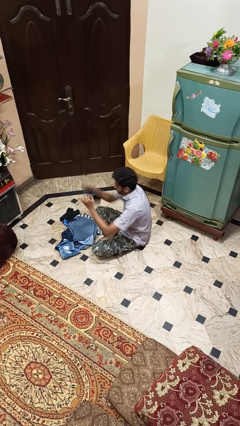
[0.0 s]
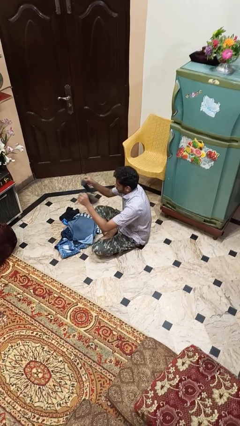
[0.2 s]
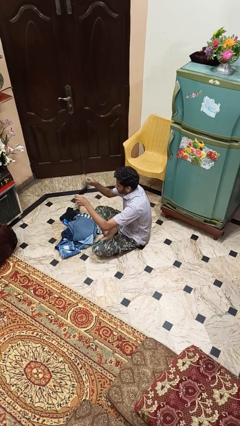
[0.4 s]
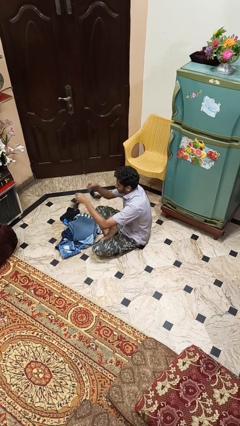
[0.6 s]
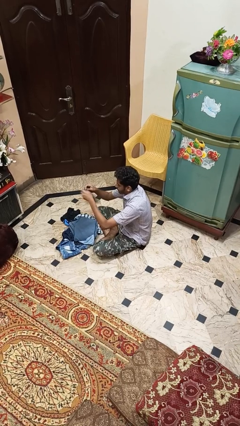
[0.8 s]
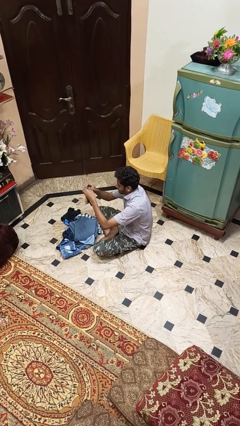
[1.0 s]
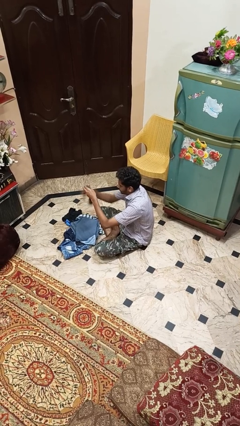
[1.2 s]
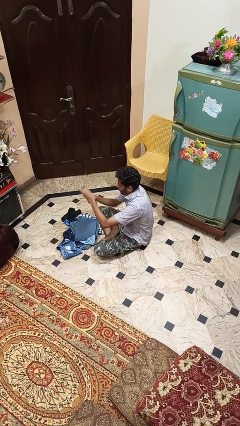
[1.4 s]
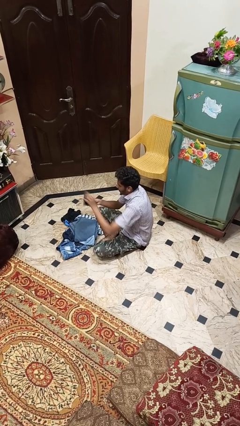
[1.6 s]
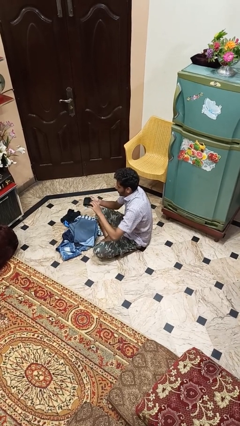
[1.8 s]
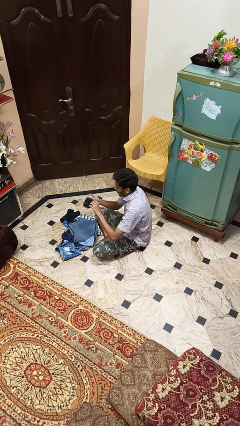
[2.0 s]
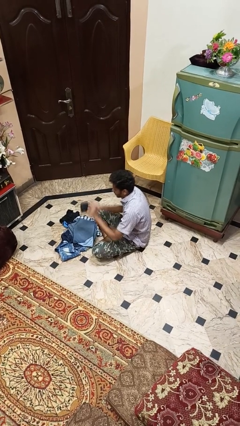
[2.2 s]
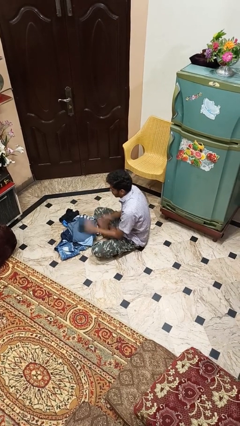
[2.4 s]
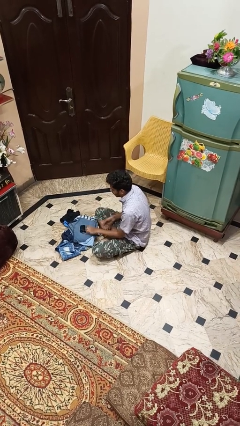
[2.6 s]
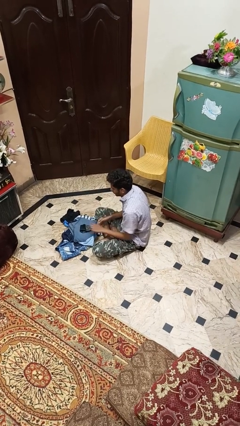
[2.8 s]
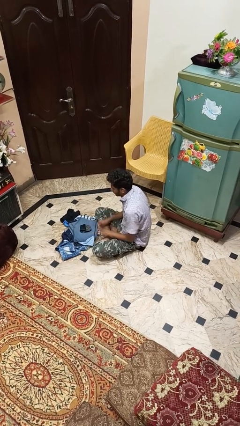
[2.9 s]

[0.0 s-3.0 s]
person folds socks

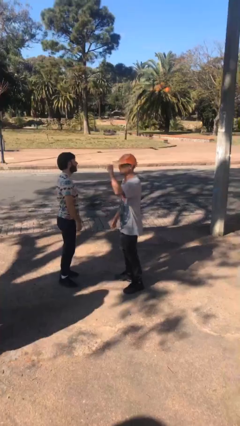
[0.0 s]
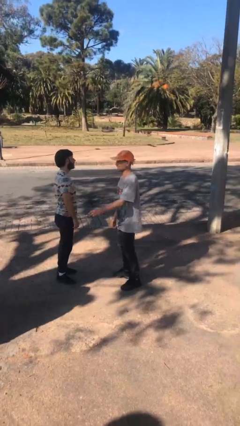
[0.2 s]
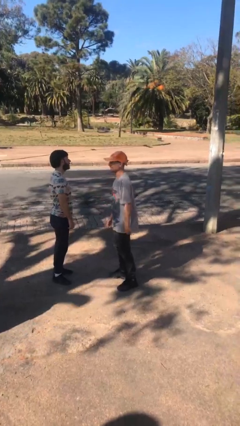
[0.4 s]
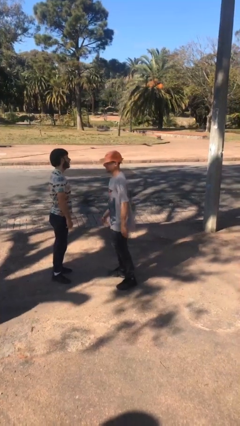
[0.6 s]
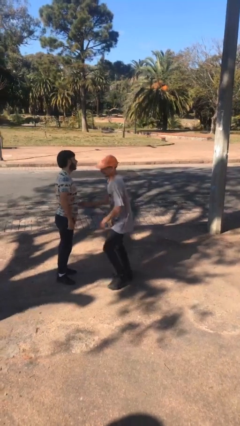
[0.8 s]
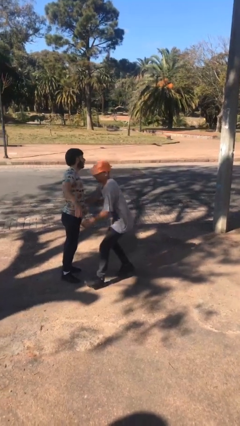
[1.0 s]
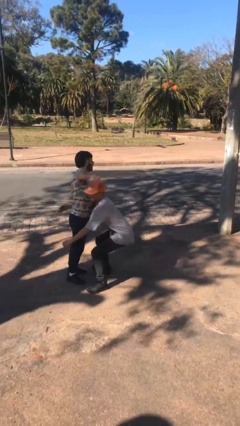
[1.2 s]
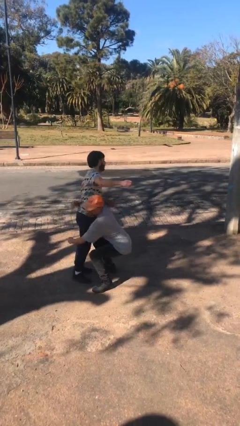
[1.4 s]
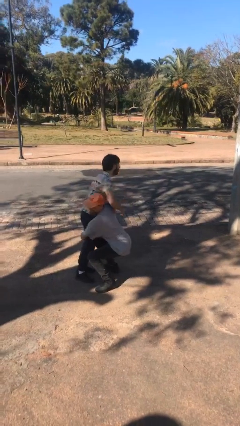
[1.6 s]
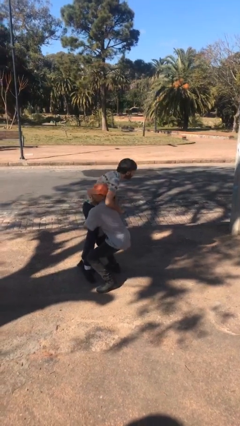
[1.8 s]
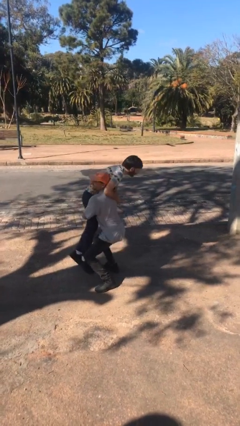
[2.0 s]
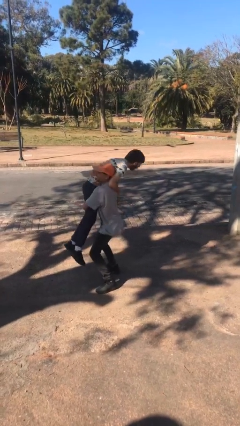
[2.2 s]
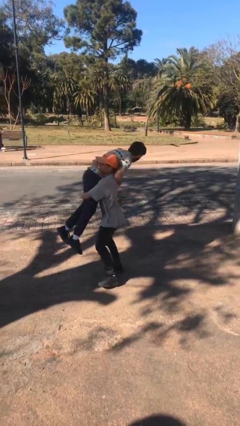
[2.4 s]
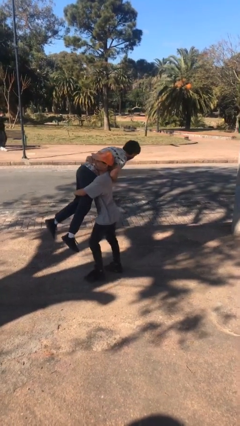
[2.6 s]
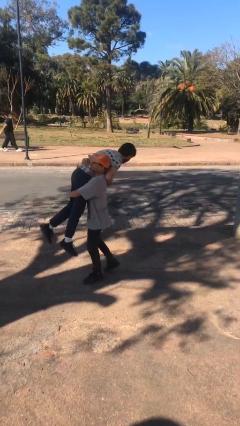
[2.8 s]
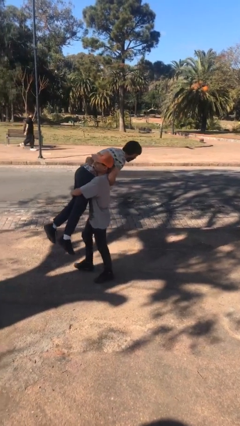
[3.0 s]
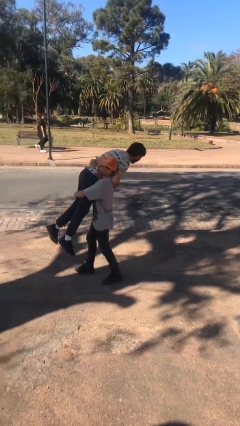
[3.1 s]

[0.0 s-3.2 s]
person carries person over shoulder

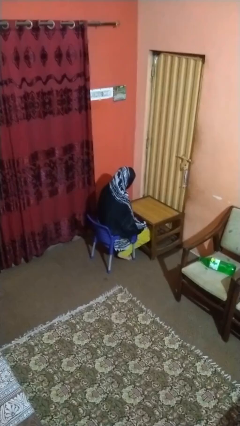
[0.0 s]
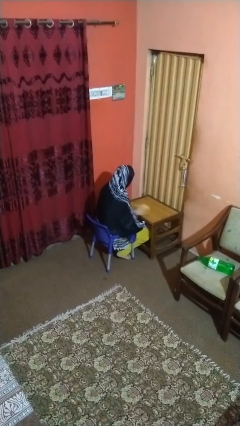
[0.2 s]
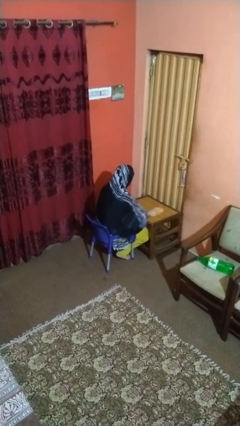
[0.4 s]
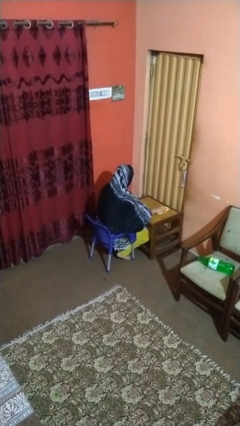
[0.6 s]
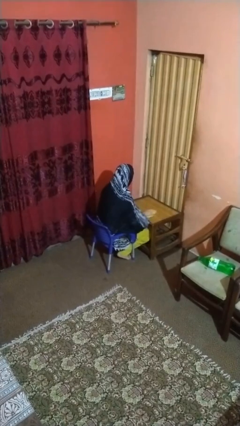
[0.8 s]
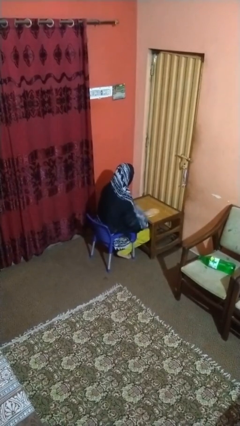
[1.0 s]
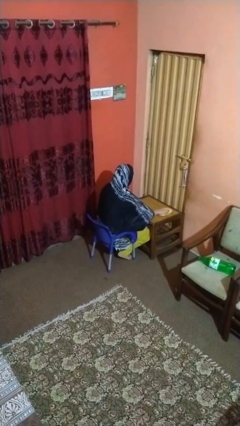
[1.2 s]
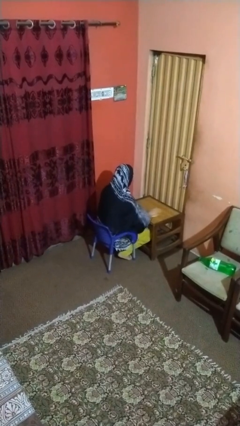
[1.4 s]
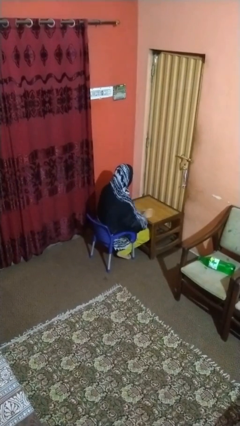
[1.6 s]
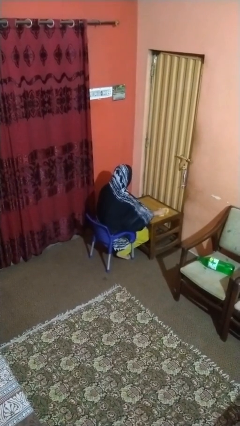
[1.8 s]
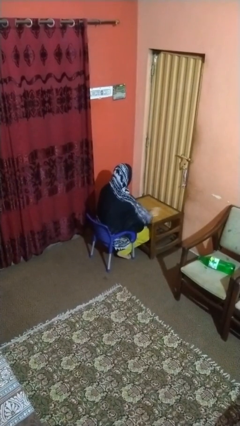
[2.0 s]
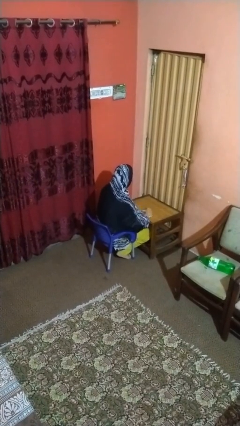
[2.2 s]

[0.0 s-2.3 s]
person cleans table with rag

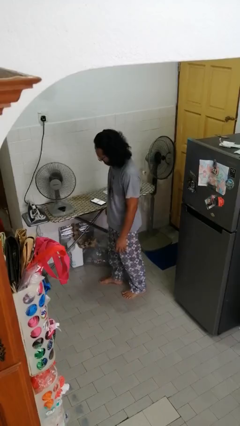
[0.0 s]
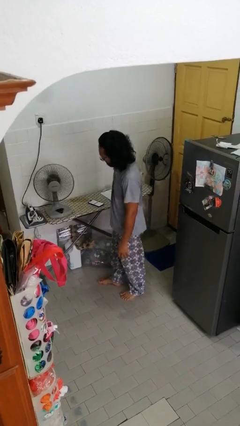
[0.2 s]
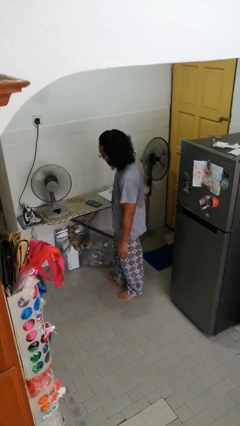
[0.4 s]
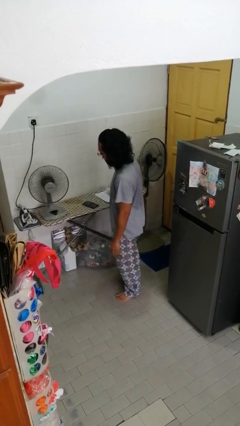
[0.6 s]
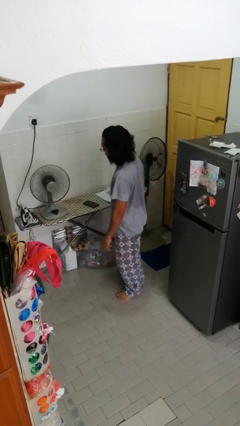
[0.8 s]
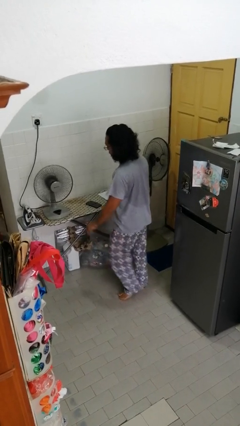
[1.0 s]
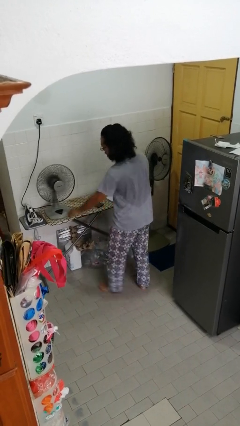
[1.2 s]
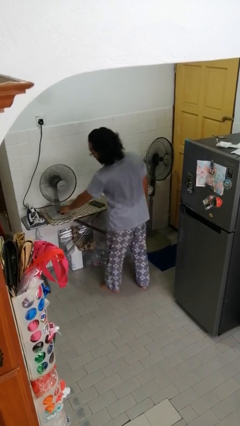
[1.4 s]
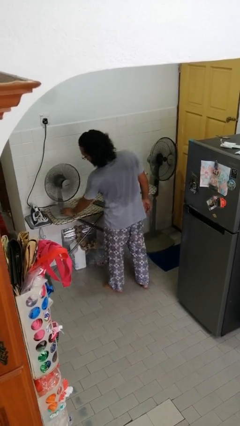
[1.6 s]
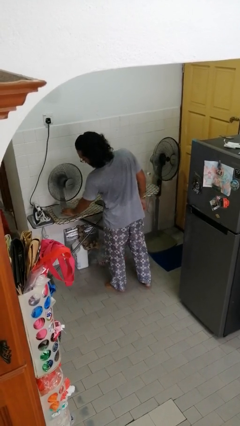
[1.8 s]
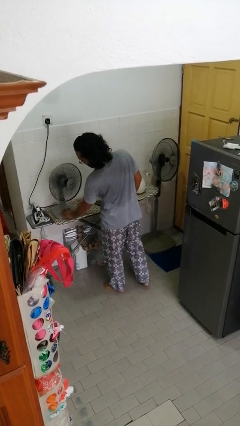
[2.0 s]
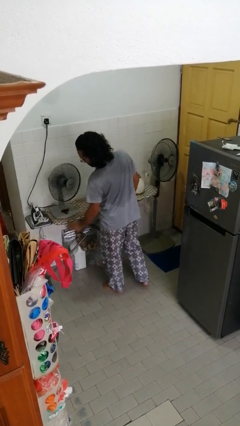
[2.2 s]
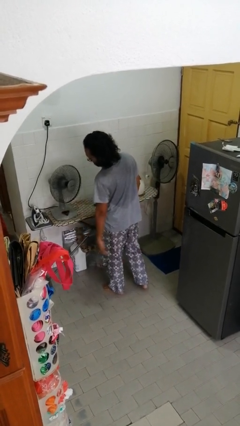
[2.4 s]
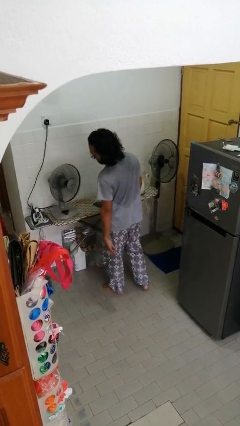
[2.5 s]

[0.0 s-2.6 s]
person turns off fan

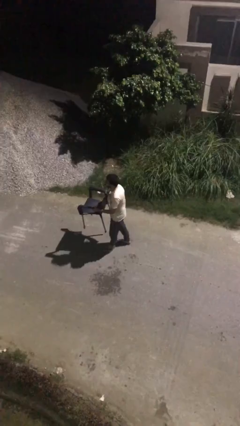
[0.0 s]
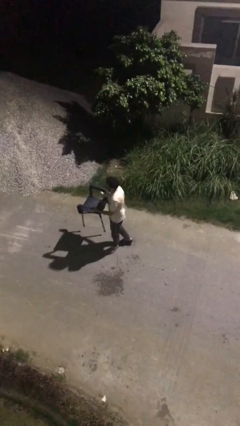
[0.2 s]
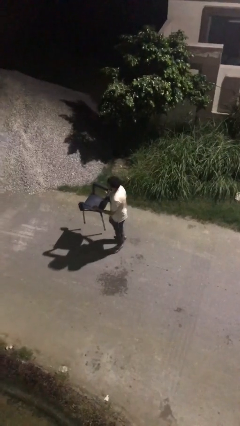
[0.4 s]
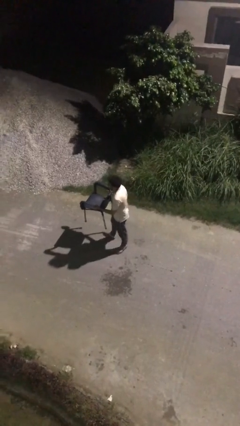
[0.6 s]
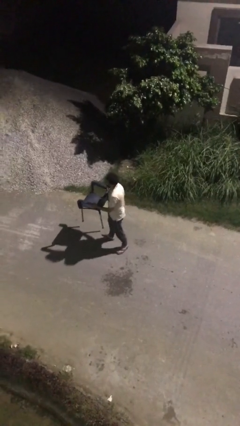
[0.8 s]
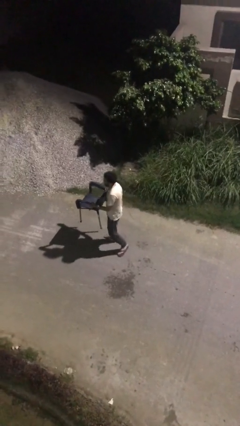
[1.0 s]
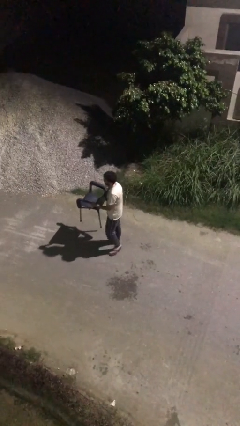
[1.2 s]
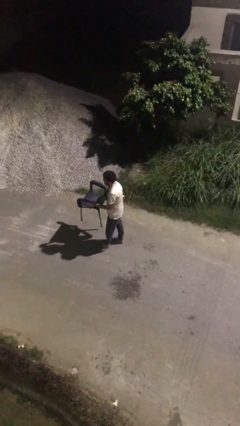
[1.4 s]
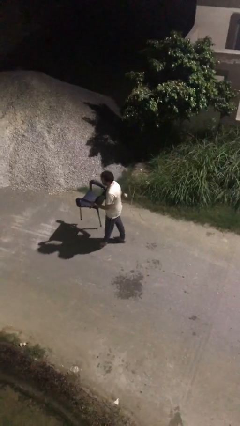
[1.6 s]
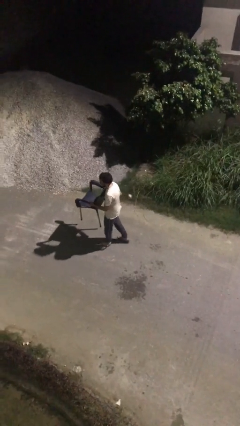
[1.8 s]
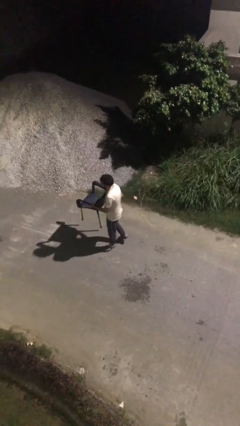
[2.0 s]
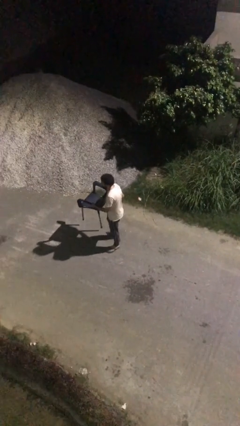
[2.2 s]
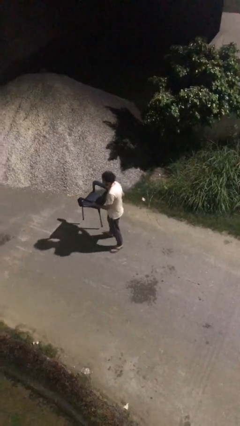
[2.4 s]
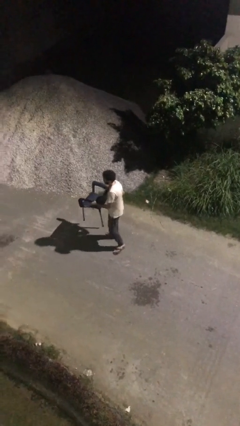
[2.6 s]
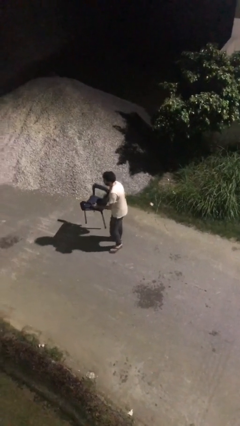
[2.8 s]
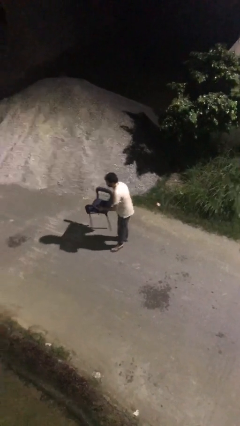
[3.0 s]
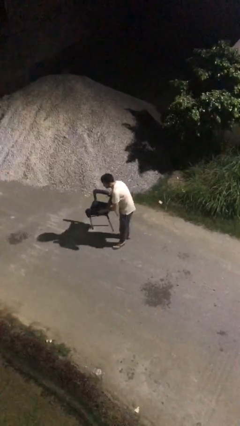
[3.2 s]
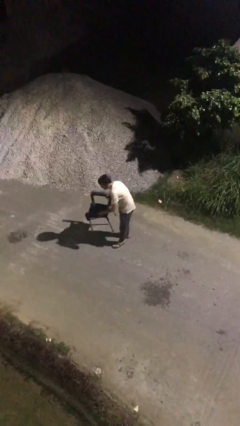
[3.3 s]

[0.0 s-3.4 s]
person carries heavy object

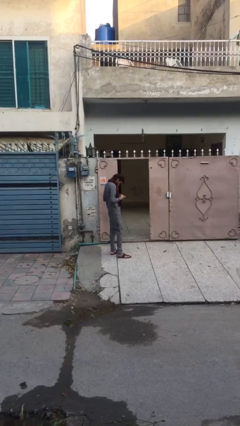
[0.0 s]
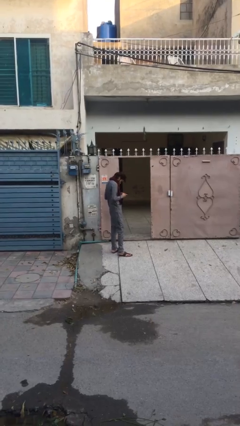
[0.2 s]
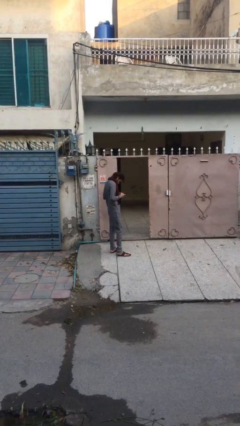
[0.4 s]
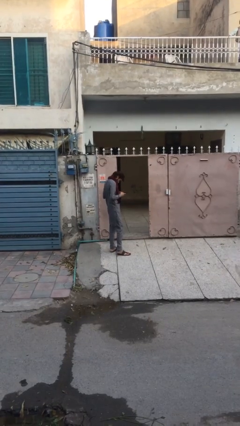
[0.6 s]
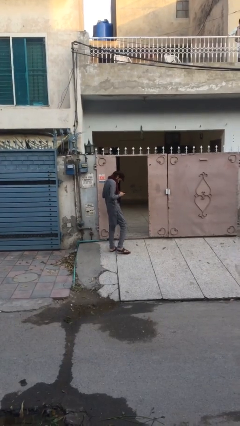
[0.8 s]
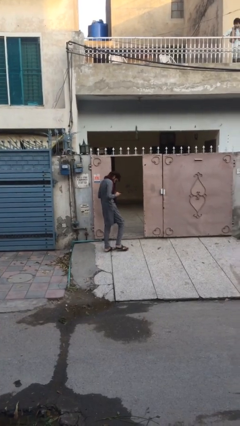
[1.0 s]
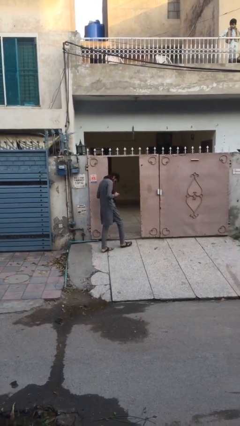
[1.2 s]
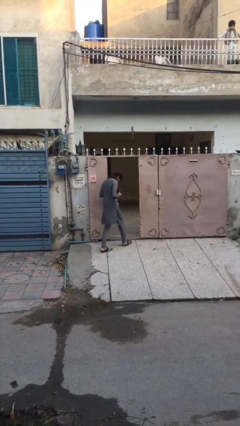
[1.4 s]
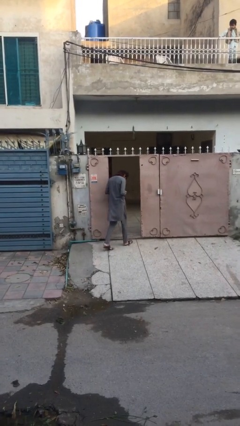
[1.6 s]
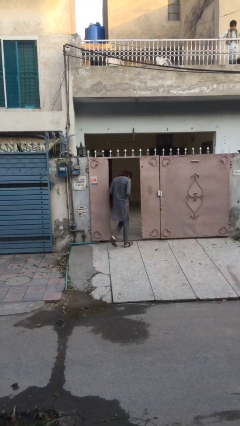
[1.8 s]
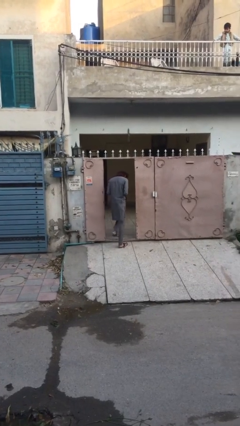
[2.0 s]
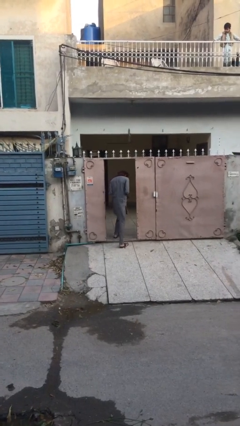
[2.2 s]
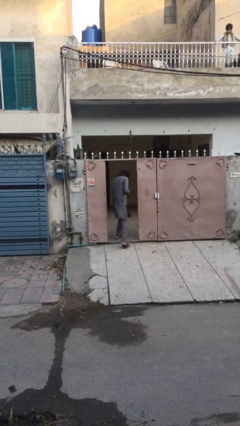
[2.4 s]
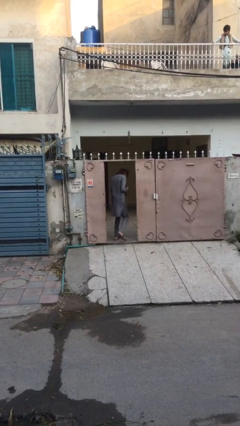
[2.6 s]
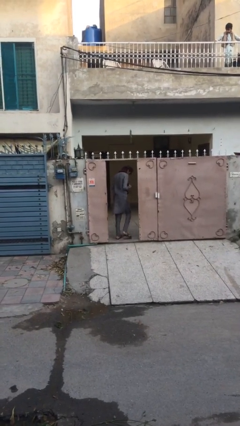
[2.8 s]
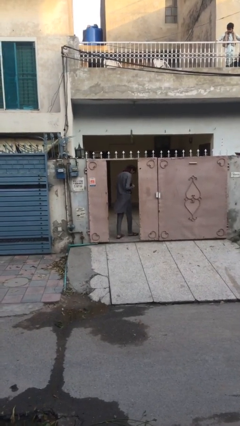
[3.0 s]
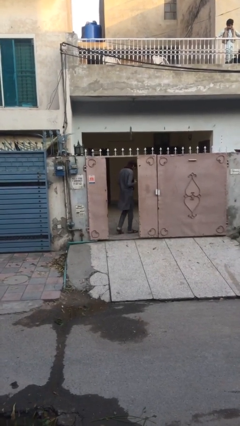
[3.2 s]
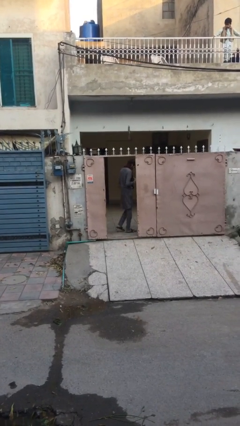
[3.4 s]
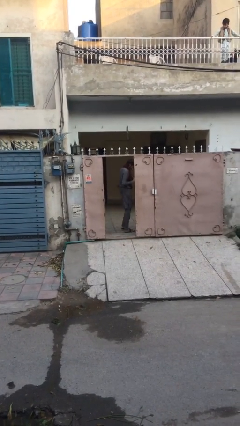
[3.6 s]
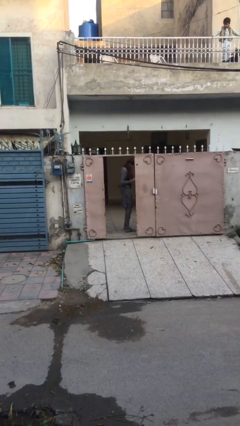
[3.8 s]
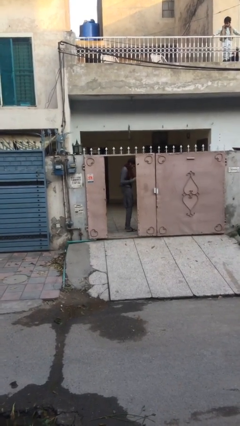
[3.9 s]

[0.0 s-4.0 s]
person enters scene through structure
